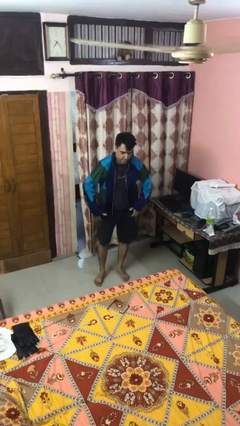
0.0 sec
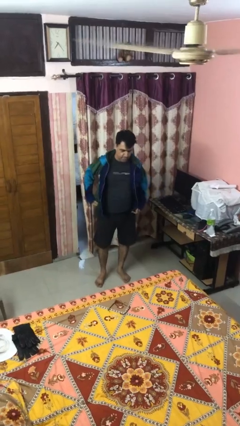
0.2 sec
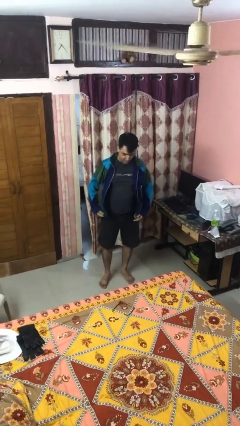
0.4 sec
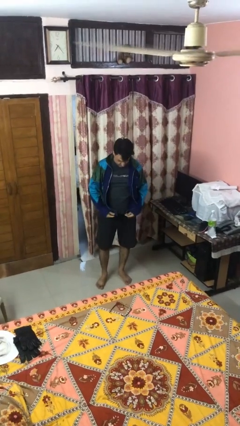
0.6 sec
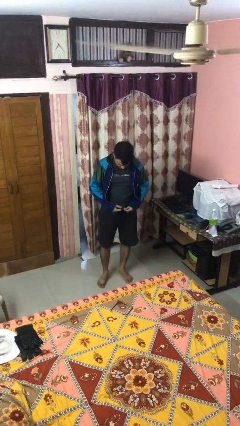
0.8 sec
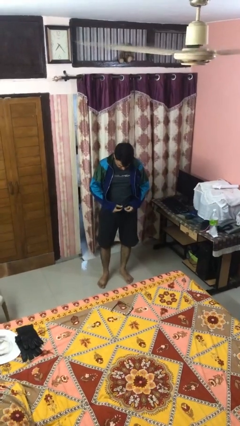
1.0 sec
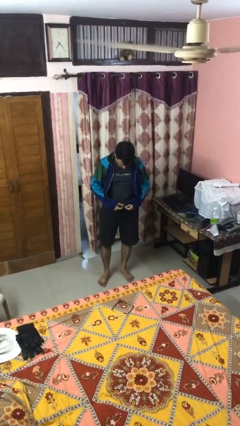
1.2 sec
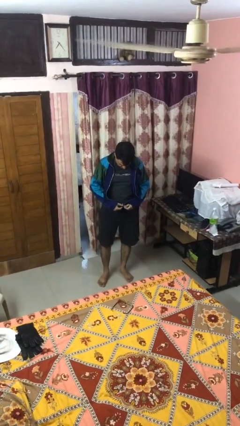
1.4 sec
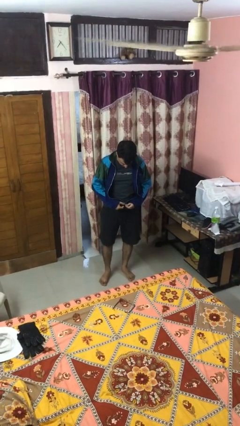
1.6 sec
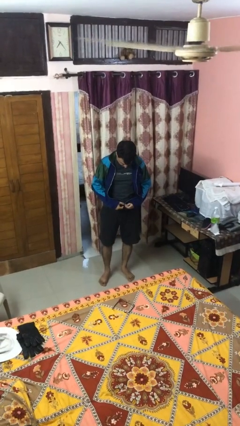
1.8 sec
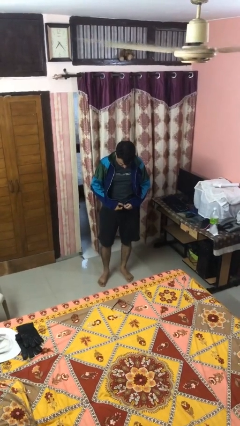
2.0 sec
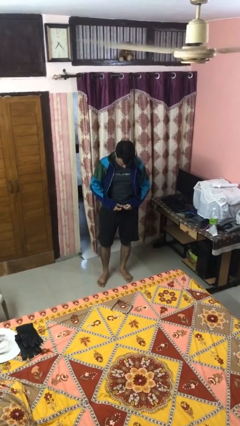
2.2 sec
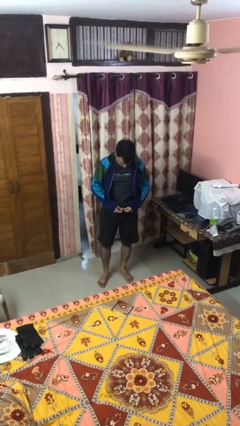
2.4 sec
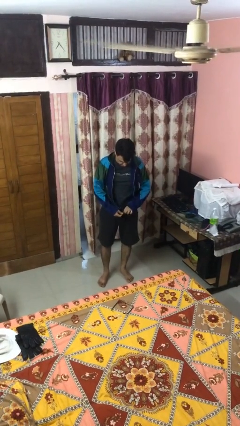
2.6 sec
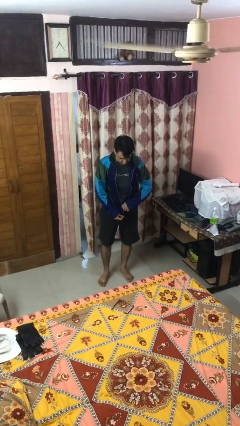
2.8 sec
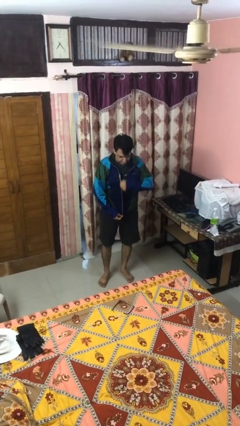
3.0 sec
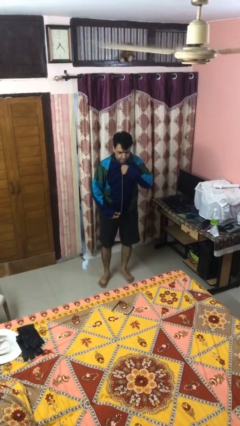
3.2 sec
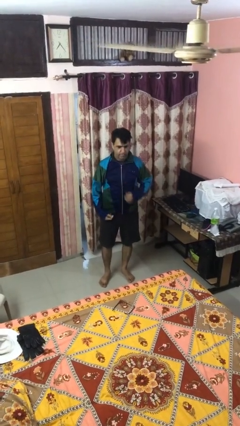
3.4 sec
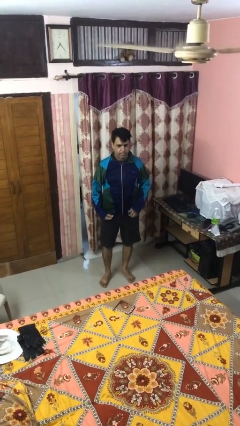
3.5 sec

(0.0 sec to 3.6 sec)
person zips up jacket

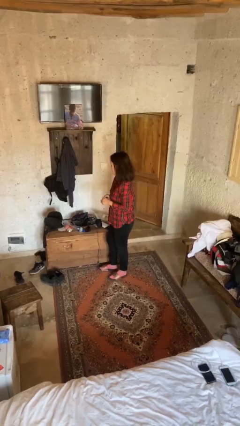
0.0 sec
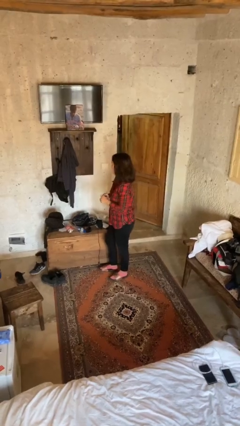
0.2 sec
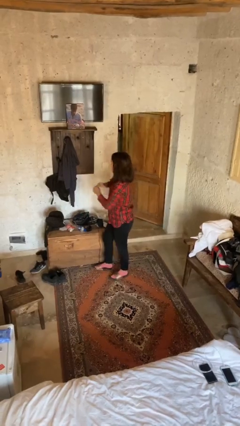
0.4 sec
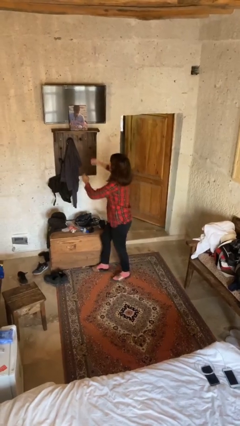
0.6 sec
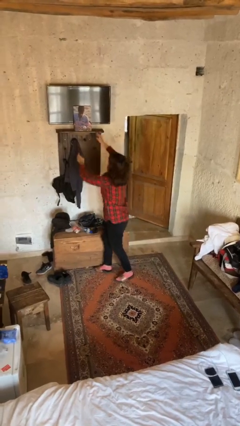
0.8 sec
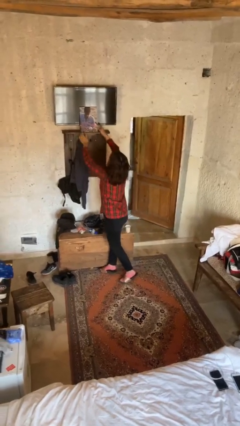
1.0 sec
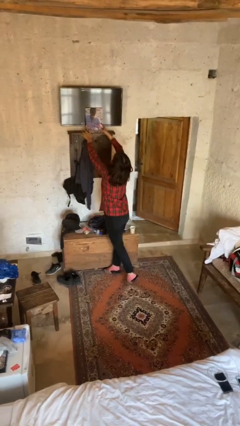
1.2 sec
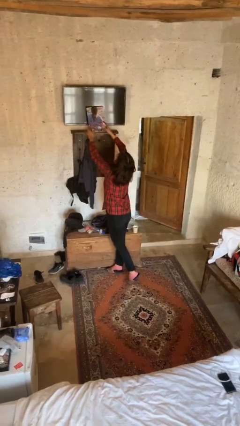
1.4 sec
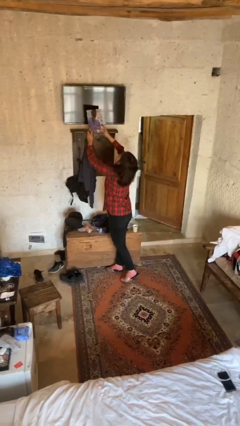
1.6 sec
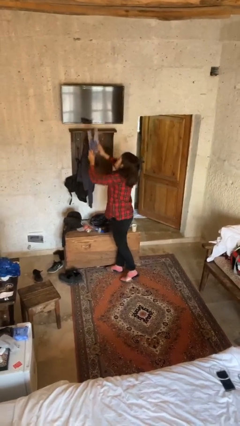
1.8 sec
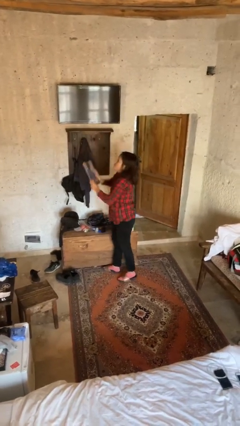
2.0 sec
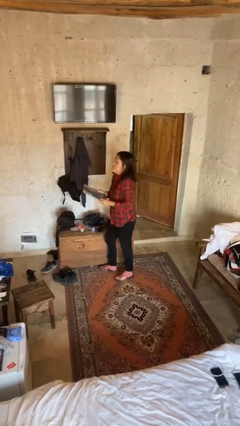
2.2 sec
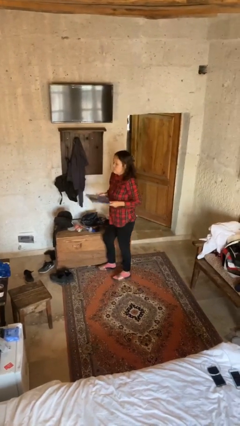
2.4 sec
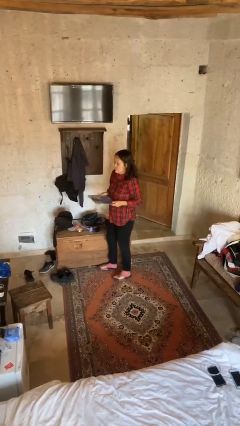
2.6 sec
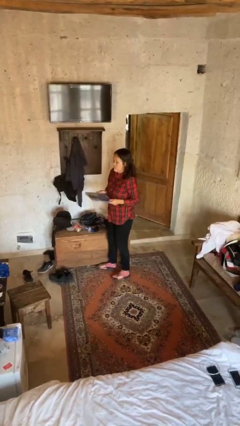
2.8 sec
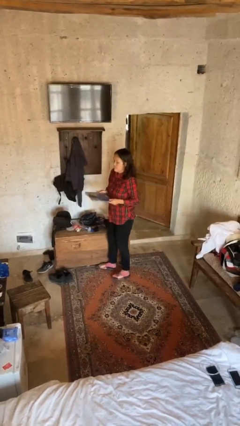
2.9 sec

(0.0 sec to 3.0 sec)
person picks up object from shelf

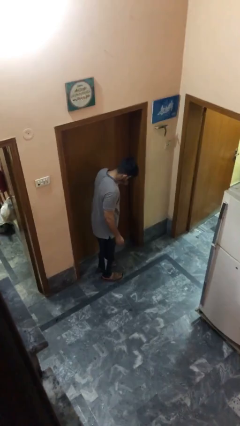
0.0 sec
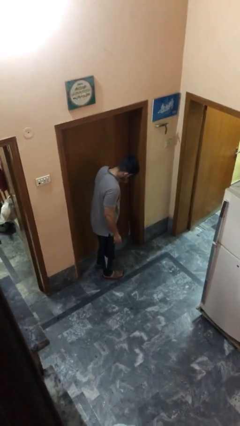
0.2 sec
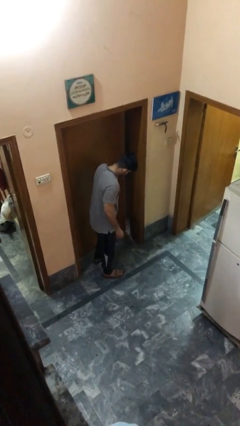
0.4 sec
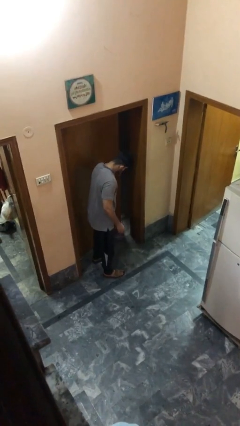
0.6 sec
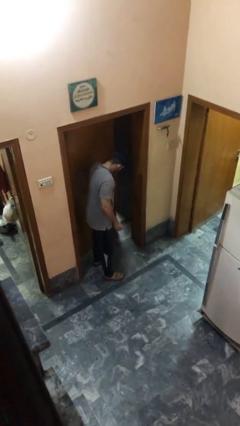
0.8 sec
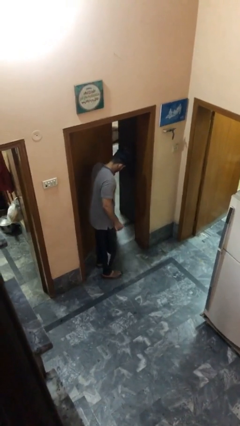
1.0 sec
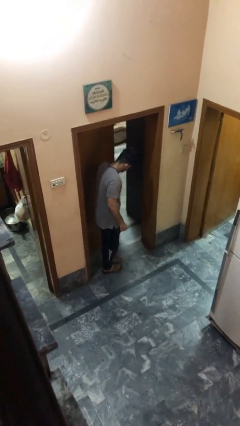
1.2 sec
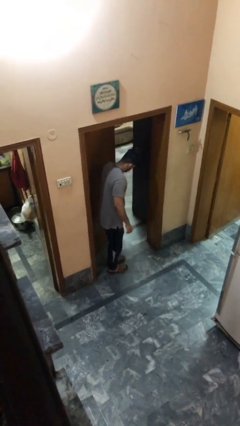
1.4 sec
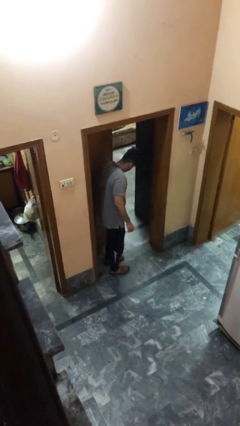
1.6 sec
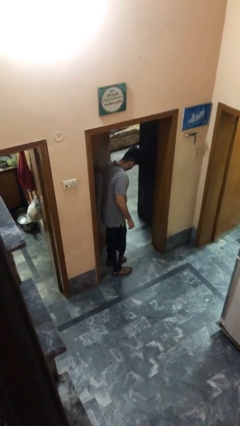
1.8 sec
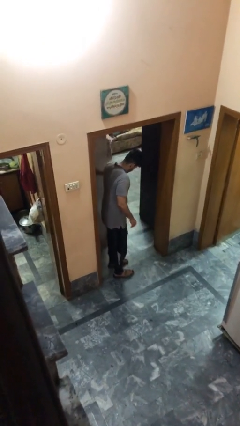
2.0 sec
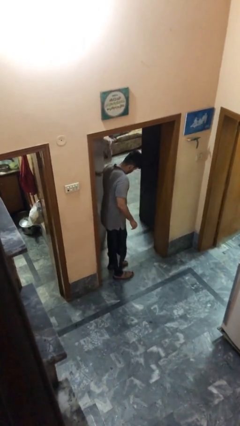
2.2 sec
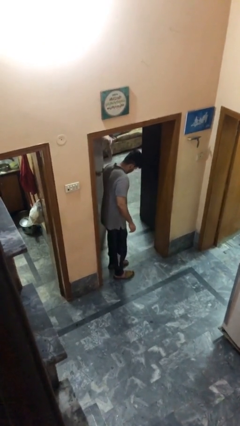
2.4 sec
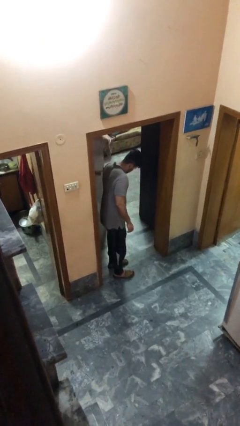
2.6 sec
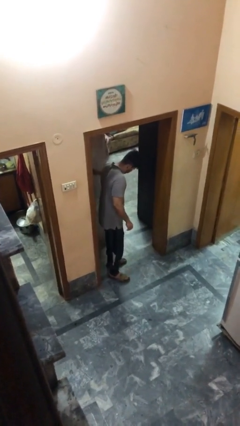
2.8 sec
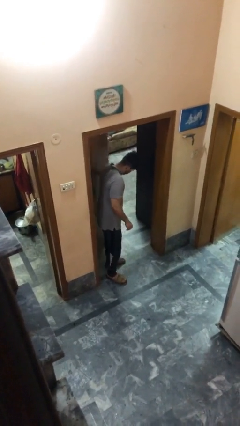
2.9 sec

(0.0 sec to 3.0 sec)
person opens facility door

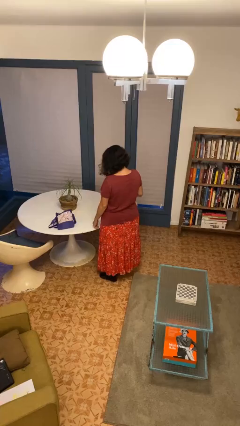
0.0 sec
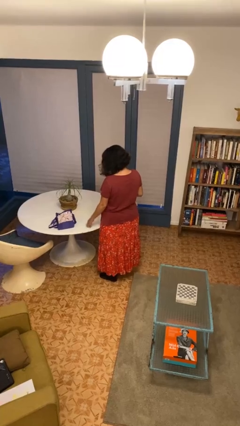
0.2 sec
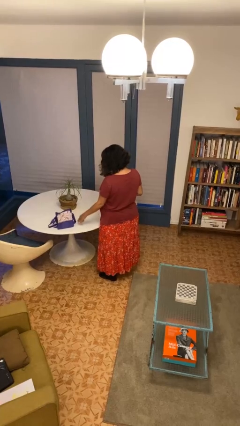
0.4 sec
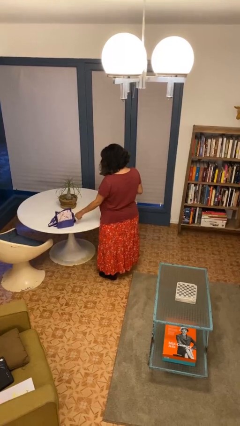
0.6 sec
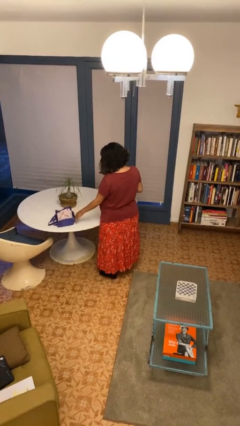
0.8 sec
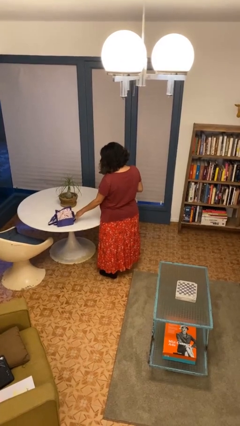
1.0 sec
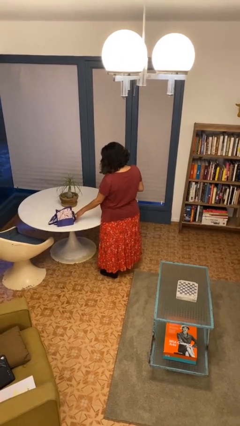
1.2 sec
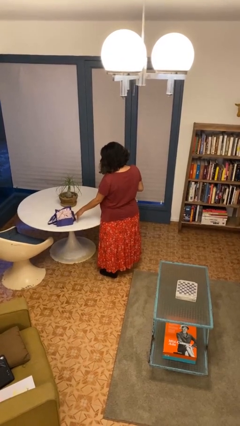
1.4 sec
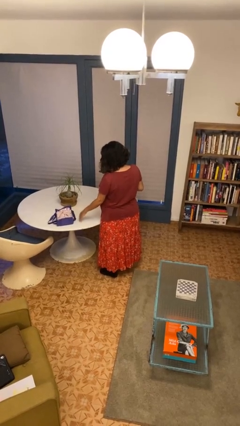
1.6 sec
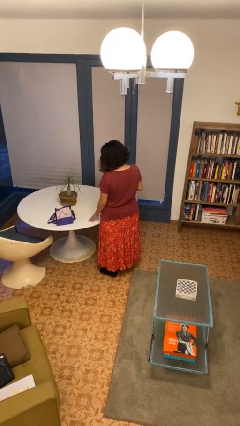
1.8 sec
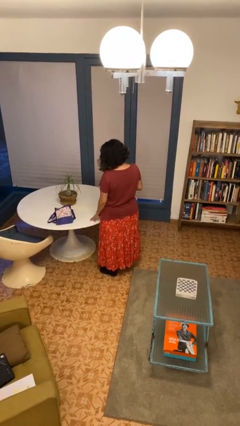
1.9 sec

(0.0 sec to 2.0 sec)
person taps object with finger

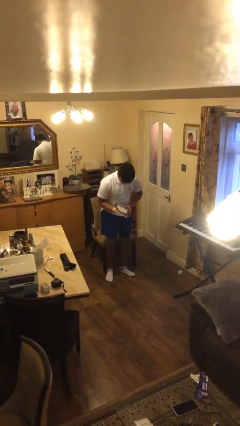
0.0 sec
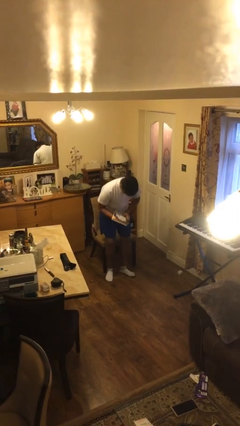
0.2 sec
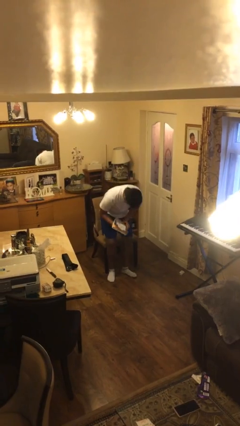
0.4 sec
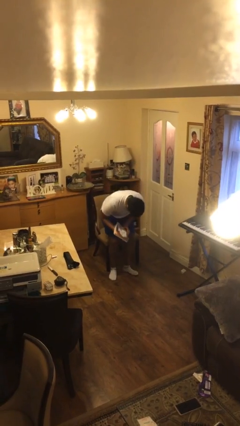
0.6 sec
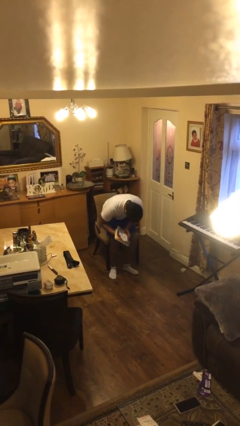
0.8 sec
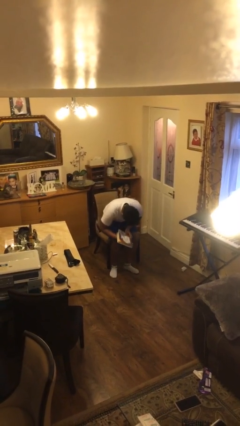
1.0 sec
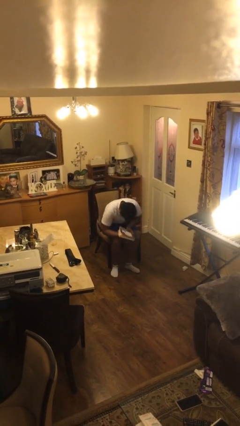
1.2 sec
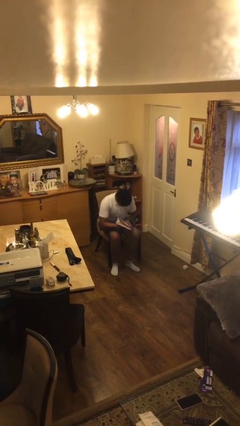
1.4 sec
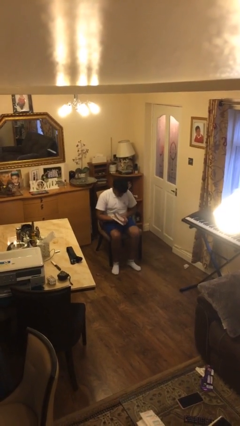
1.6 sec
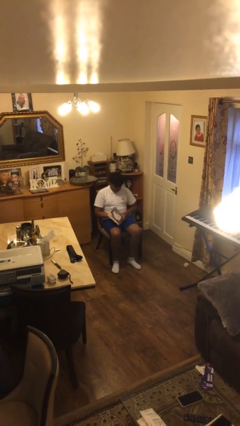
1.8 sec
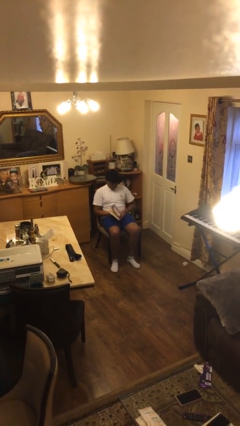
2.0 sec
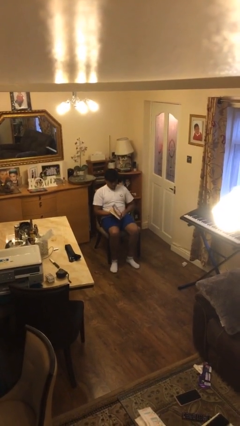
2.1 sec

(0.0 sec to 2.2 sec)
person sits down

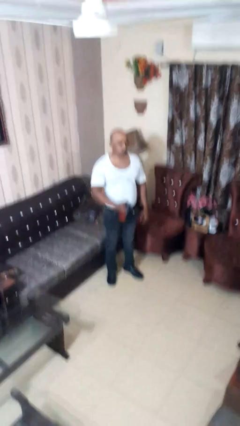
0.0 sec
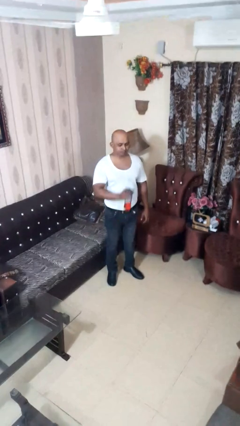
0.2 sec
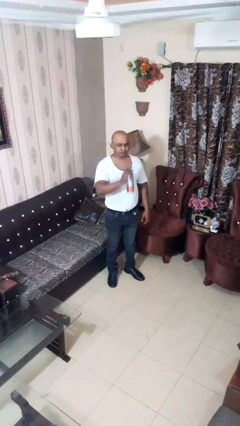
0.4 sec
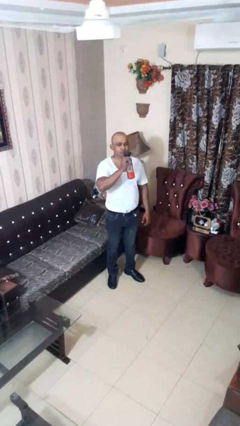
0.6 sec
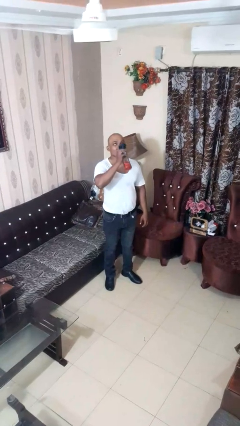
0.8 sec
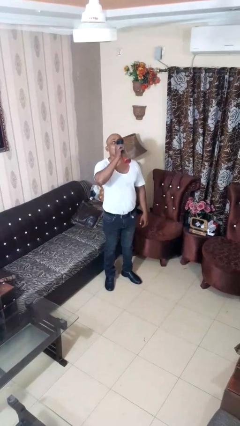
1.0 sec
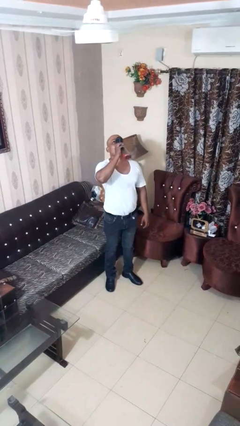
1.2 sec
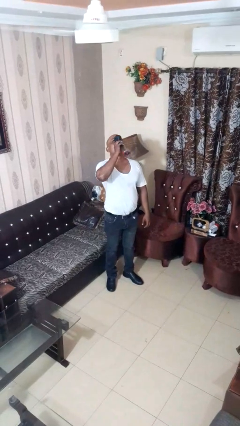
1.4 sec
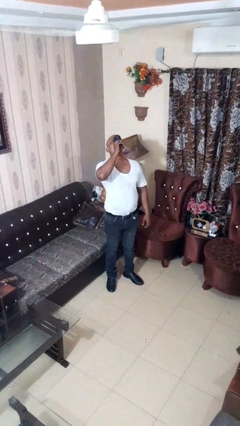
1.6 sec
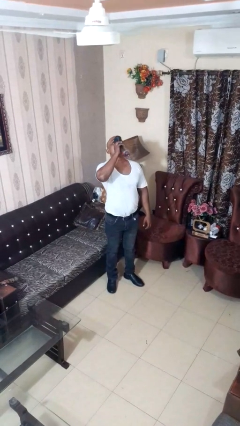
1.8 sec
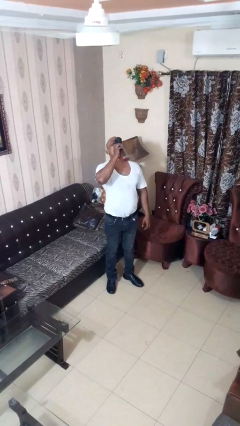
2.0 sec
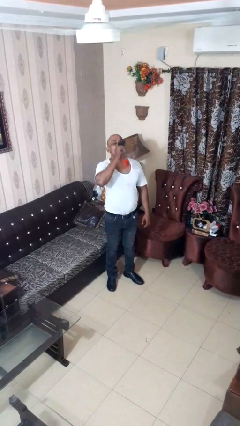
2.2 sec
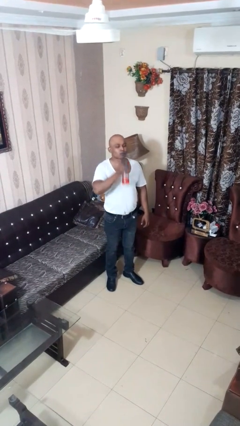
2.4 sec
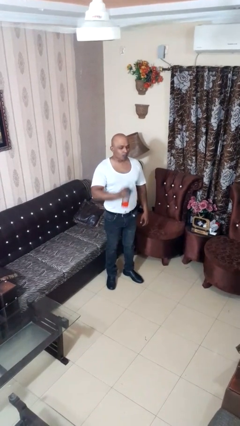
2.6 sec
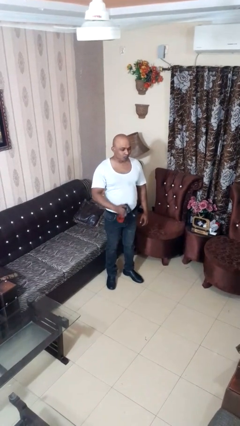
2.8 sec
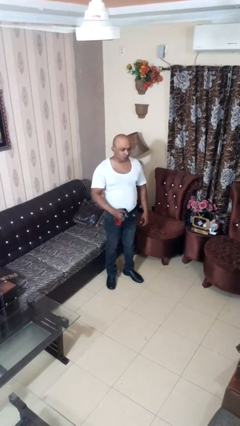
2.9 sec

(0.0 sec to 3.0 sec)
person drinks from bottle

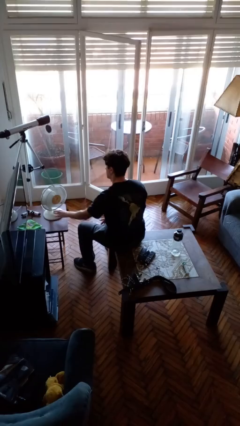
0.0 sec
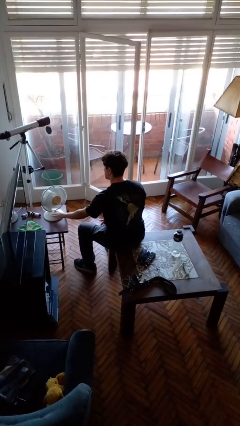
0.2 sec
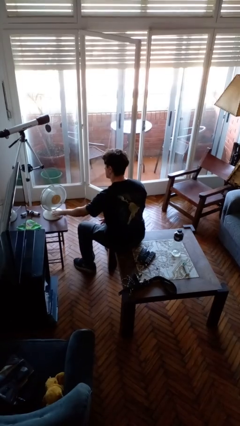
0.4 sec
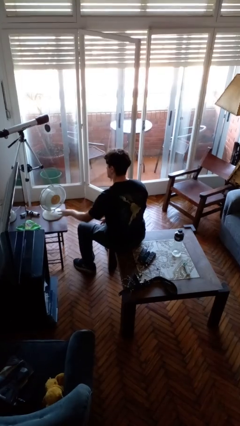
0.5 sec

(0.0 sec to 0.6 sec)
person turns off fan
